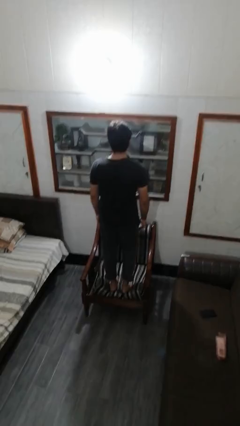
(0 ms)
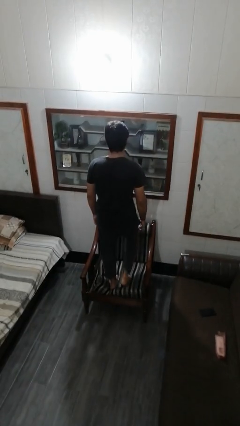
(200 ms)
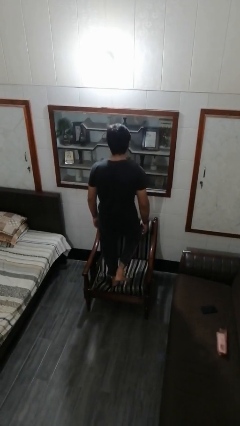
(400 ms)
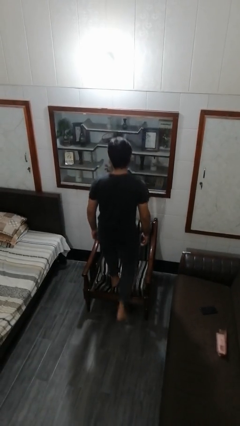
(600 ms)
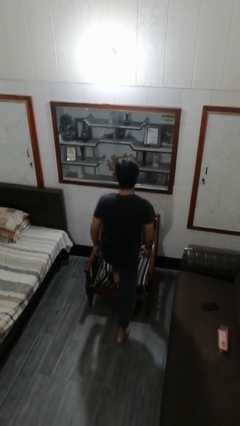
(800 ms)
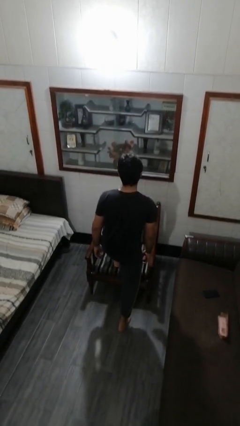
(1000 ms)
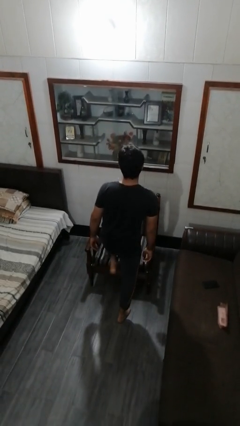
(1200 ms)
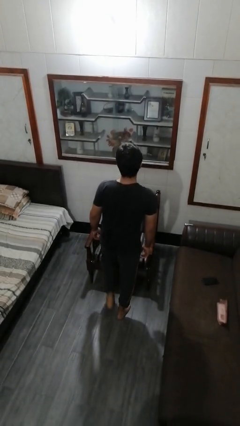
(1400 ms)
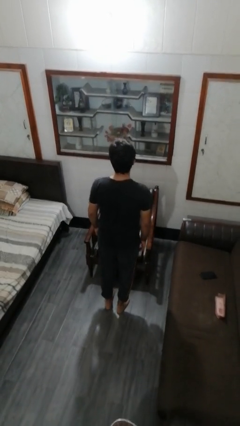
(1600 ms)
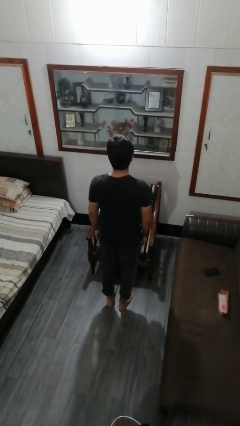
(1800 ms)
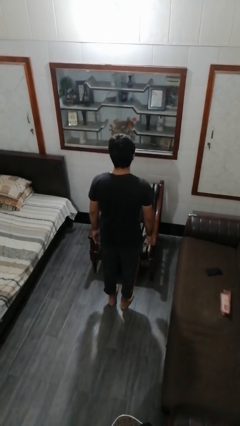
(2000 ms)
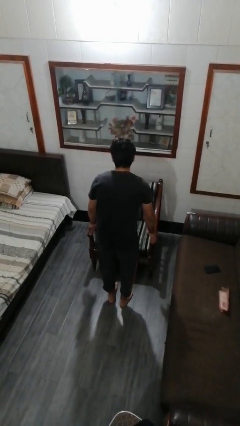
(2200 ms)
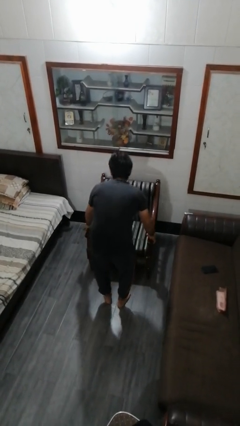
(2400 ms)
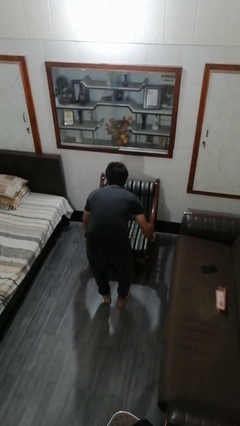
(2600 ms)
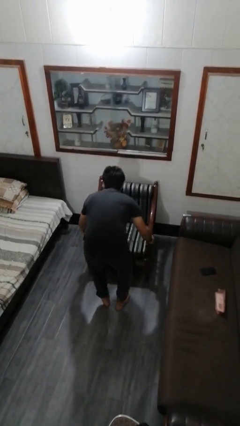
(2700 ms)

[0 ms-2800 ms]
person climbs off chair

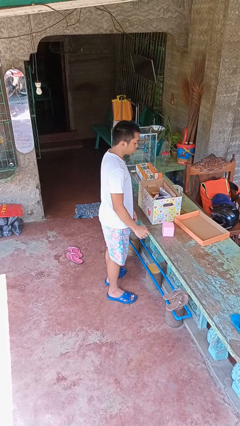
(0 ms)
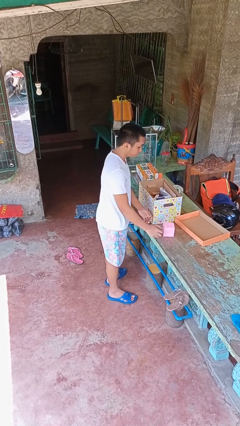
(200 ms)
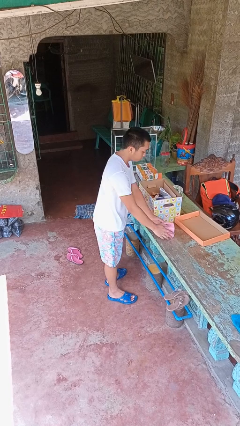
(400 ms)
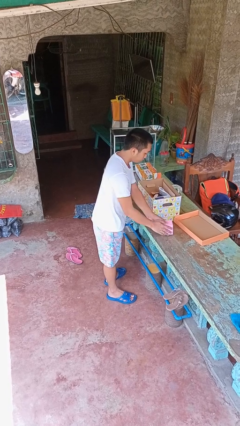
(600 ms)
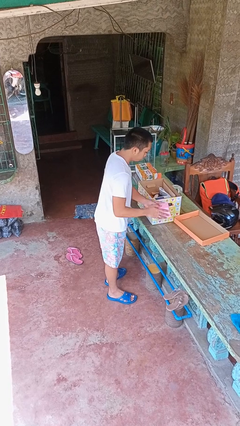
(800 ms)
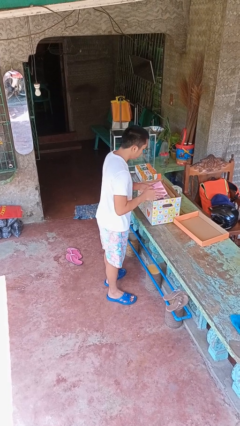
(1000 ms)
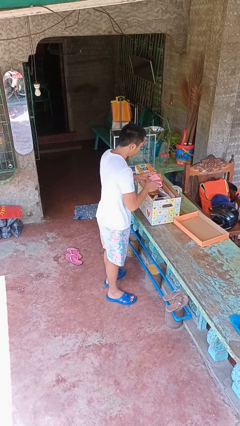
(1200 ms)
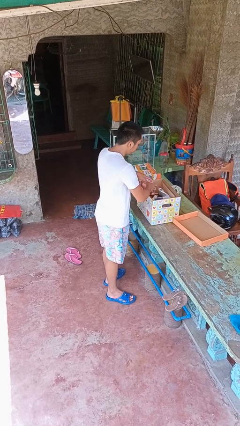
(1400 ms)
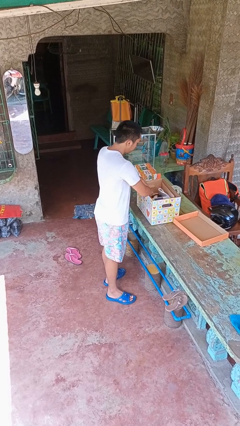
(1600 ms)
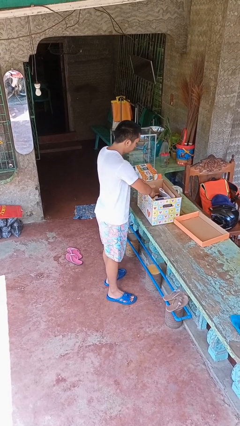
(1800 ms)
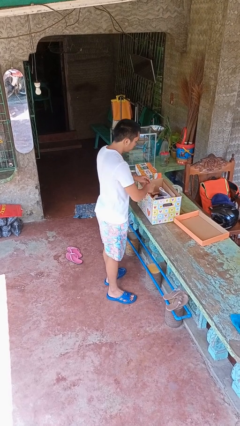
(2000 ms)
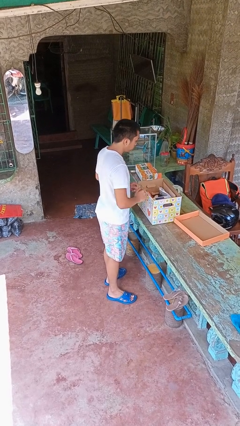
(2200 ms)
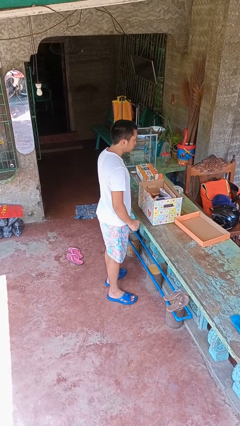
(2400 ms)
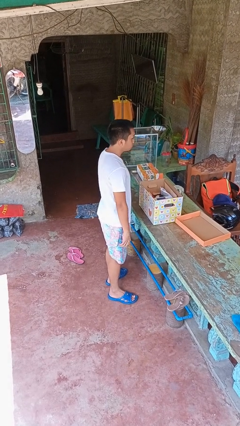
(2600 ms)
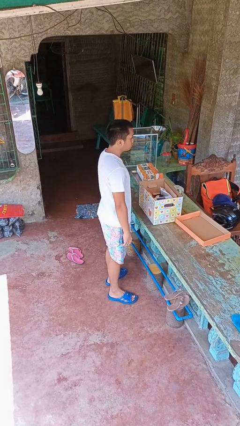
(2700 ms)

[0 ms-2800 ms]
person puts object into box

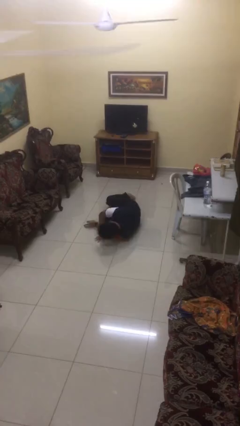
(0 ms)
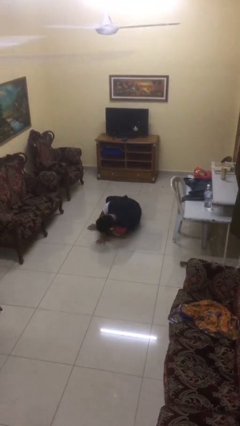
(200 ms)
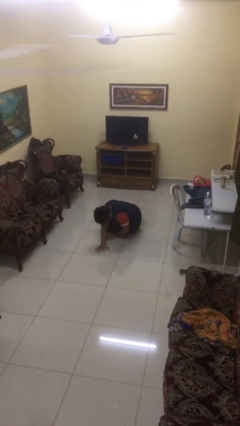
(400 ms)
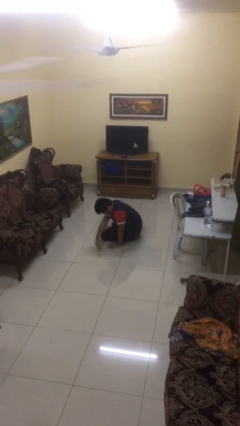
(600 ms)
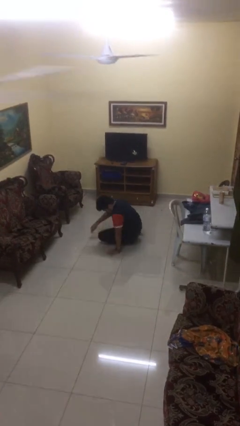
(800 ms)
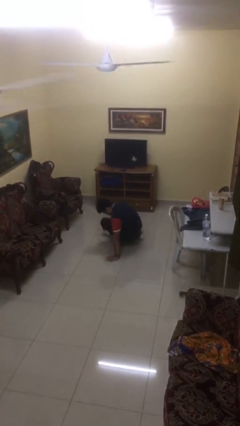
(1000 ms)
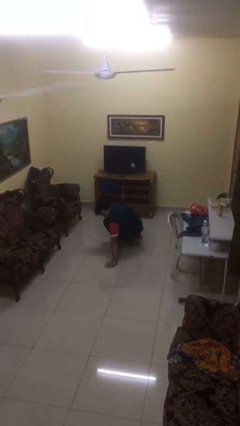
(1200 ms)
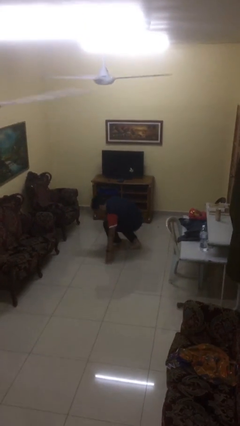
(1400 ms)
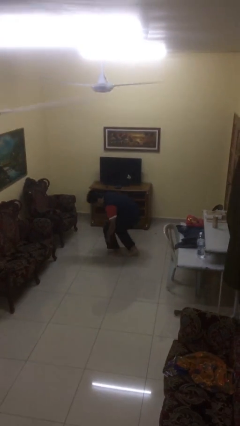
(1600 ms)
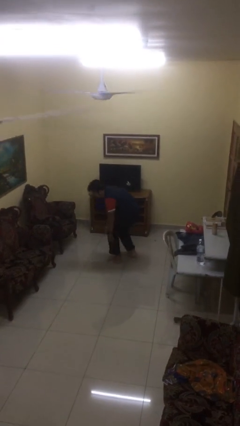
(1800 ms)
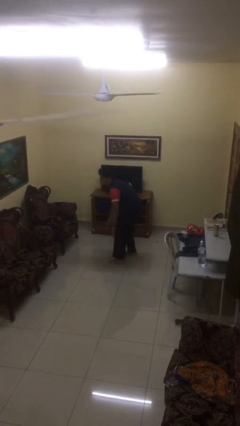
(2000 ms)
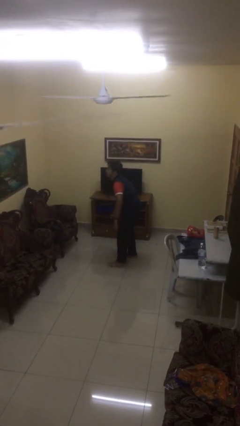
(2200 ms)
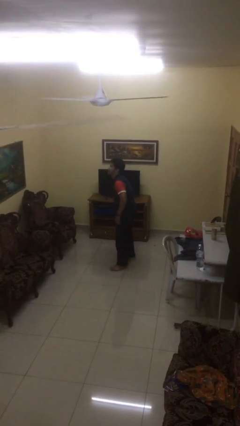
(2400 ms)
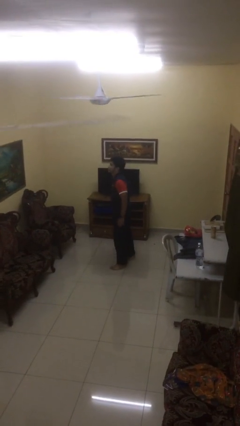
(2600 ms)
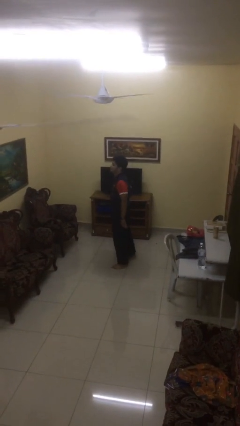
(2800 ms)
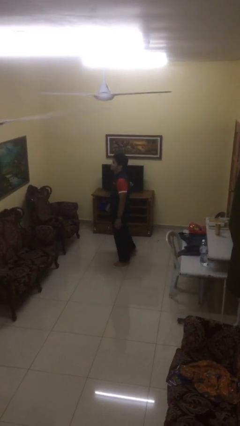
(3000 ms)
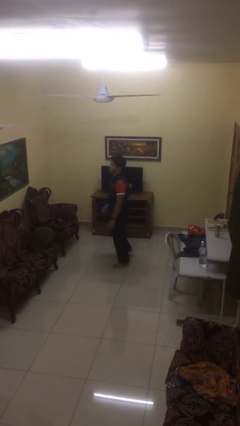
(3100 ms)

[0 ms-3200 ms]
person stands up from floor

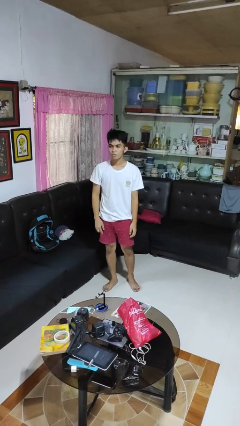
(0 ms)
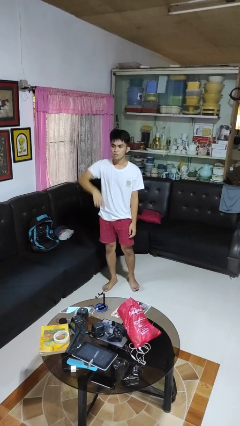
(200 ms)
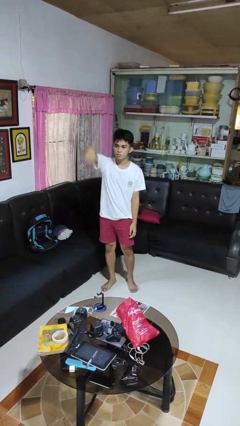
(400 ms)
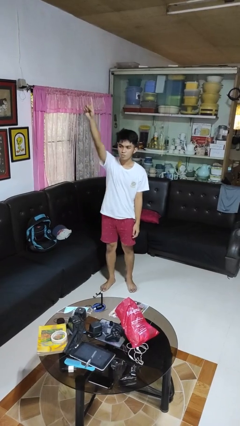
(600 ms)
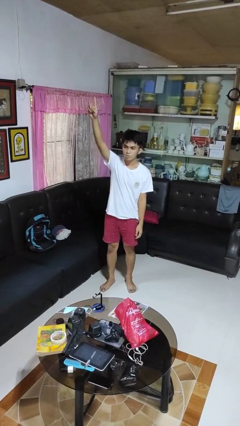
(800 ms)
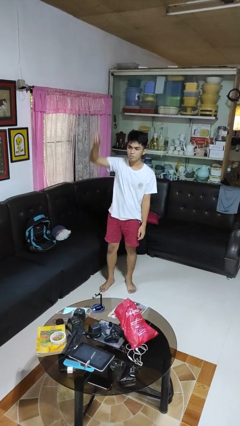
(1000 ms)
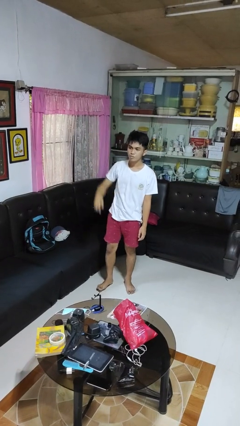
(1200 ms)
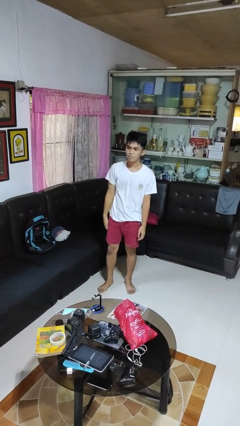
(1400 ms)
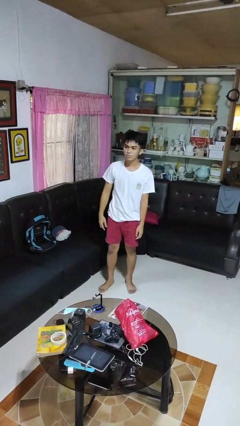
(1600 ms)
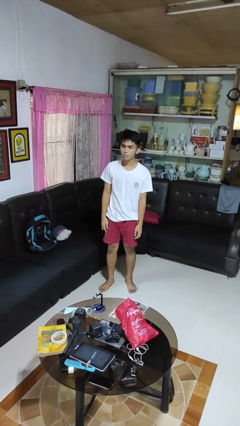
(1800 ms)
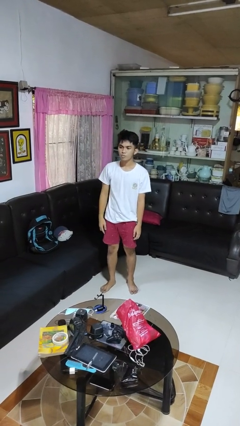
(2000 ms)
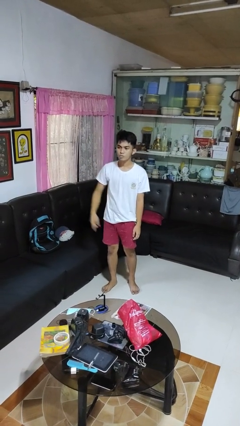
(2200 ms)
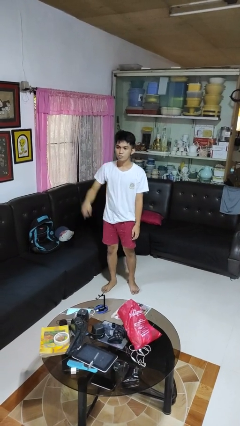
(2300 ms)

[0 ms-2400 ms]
person gestures swipe up

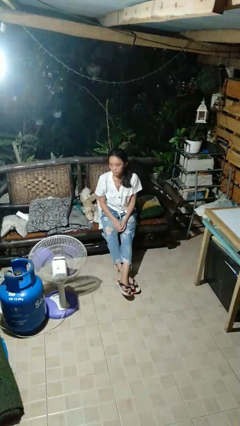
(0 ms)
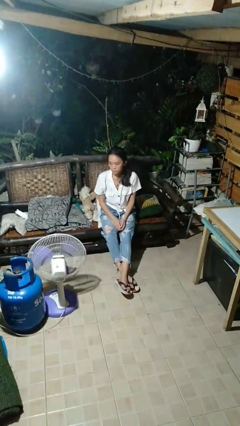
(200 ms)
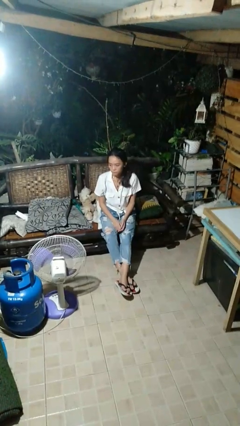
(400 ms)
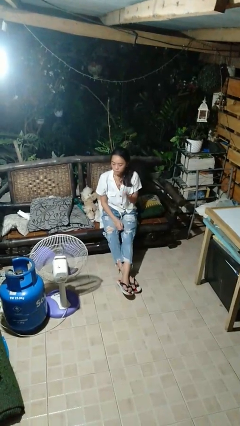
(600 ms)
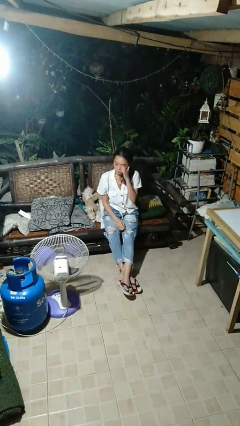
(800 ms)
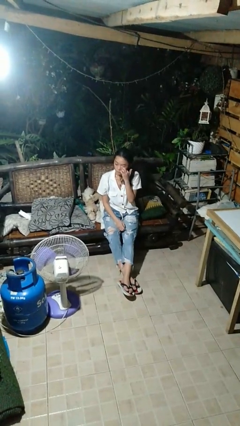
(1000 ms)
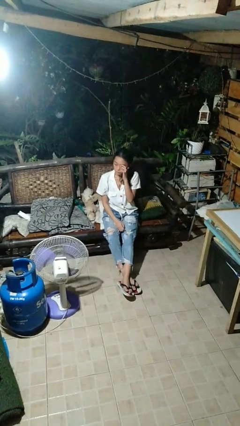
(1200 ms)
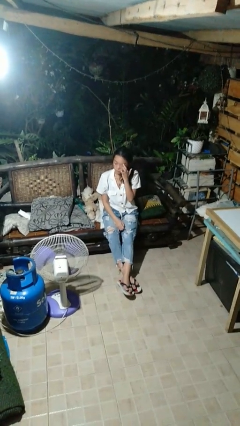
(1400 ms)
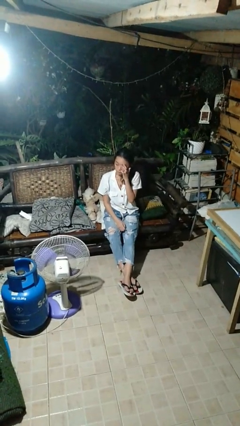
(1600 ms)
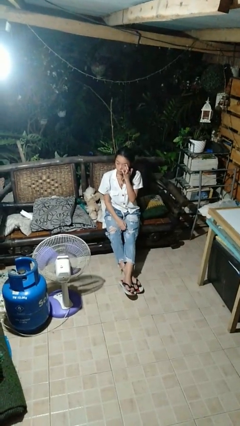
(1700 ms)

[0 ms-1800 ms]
person rubs eyes

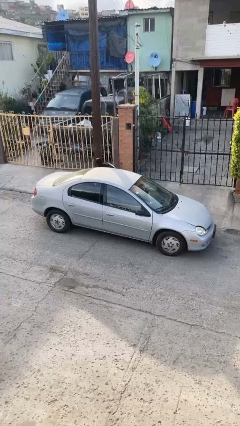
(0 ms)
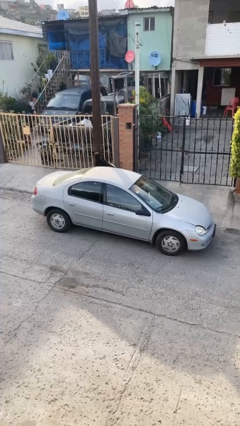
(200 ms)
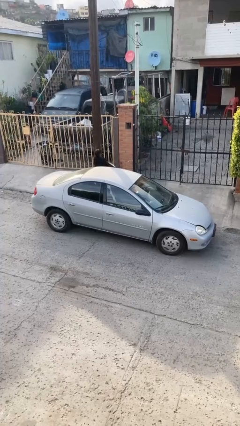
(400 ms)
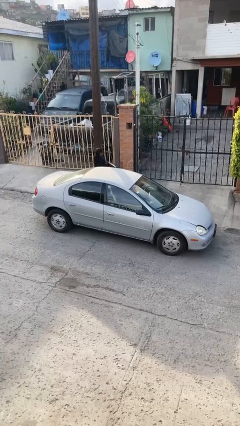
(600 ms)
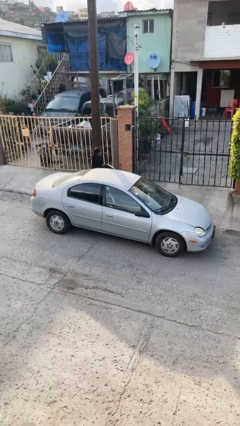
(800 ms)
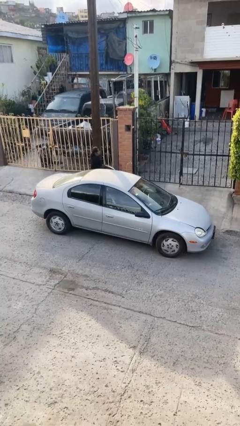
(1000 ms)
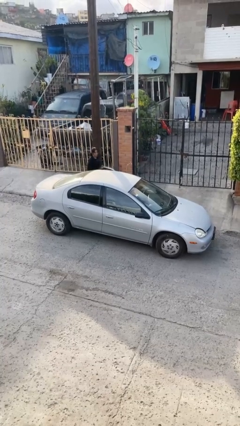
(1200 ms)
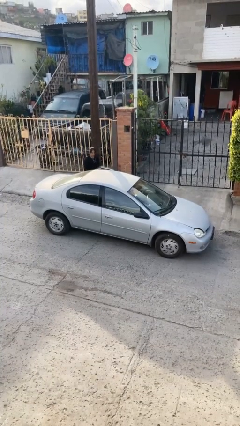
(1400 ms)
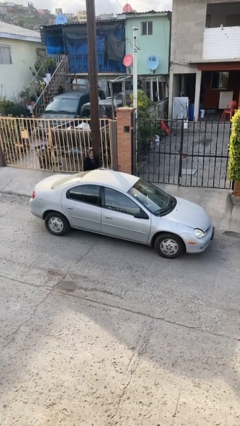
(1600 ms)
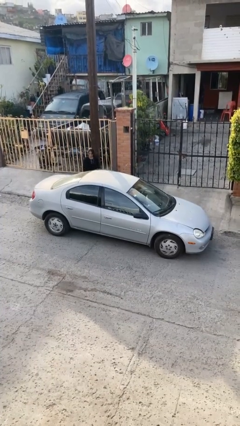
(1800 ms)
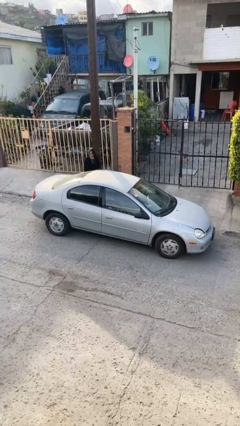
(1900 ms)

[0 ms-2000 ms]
car drops off person

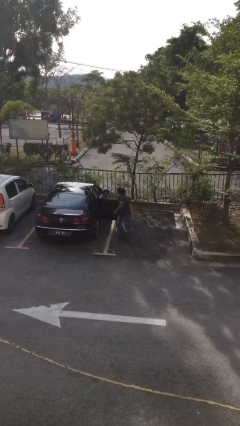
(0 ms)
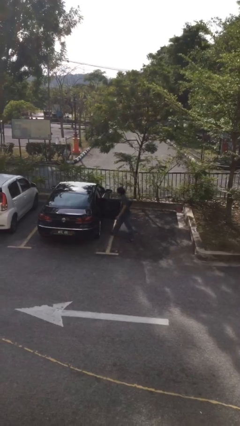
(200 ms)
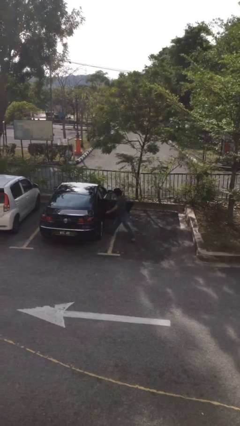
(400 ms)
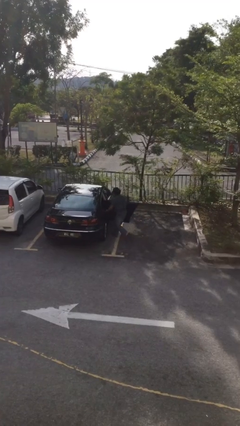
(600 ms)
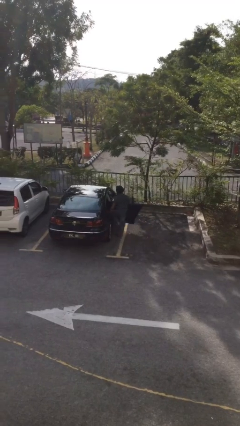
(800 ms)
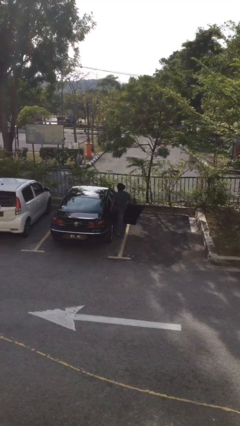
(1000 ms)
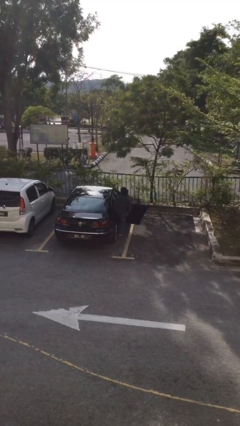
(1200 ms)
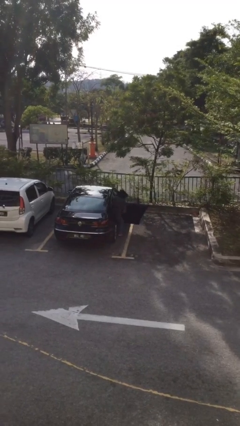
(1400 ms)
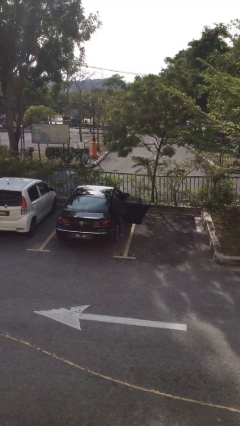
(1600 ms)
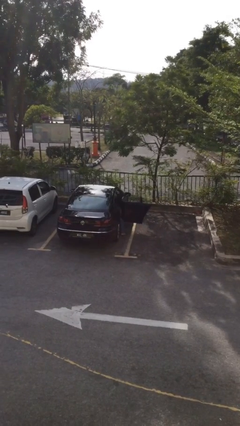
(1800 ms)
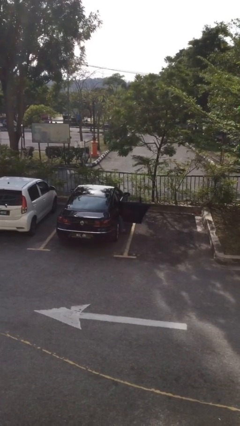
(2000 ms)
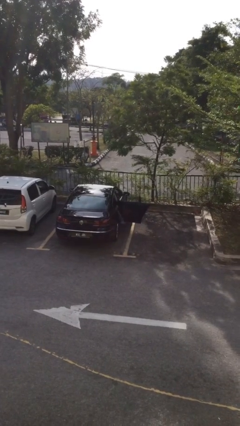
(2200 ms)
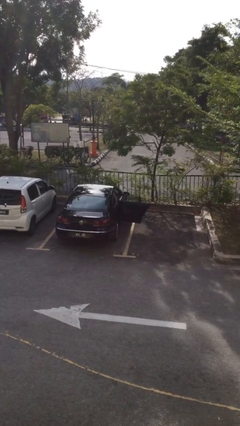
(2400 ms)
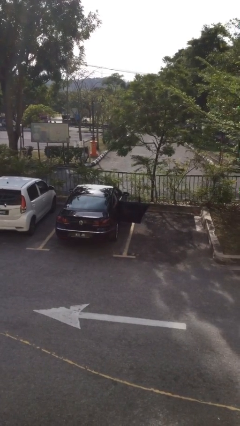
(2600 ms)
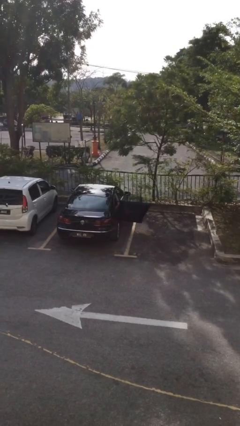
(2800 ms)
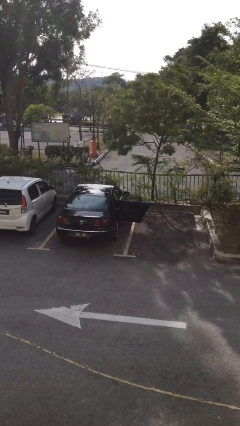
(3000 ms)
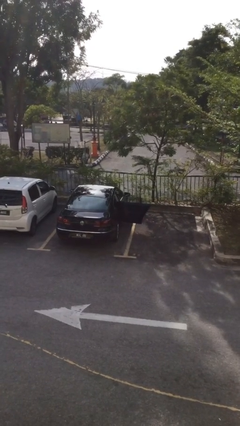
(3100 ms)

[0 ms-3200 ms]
person enters car
